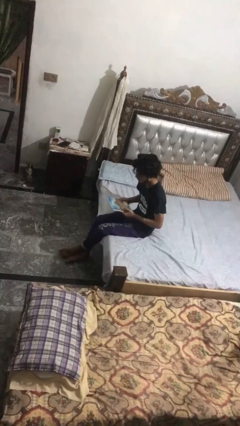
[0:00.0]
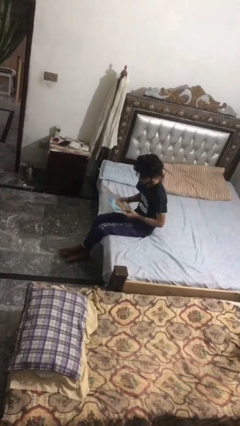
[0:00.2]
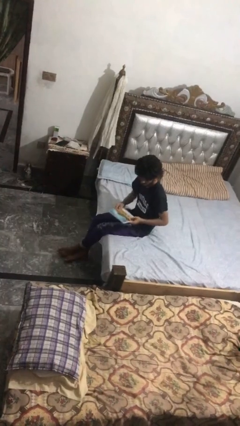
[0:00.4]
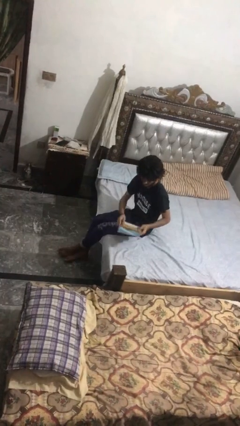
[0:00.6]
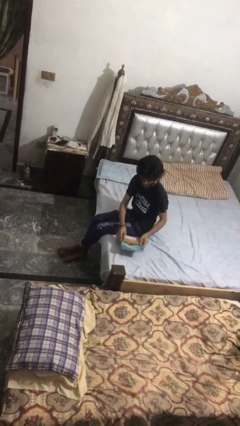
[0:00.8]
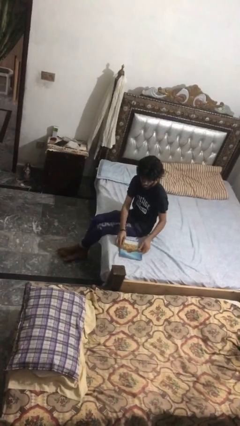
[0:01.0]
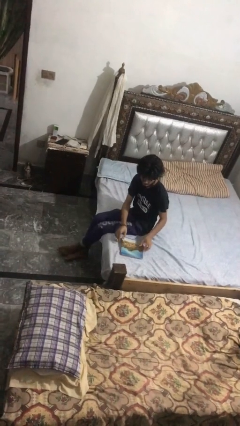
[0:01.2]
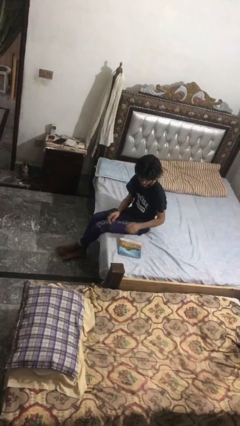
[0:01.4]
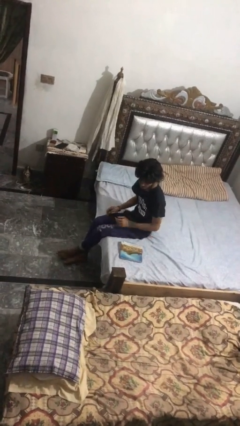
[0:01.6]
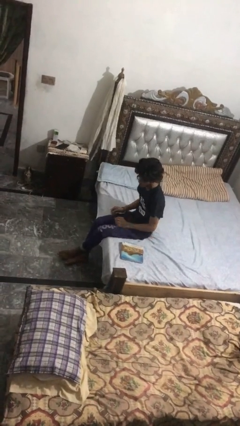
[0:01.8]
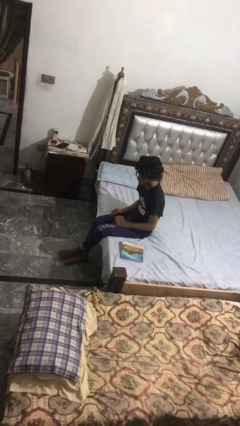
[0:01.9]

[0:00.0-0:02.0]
person puts down object on bed

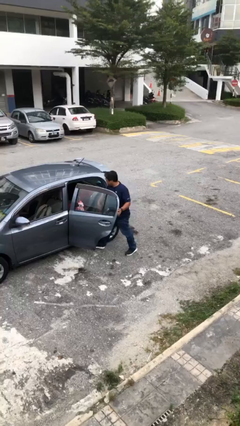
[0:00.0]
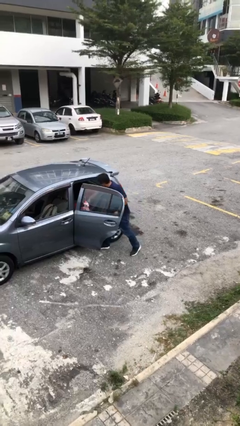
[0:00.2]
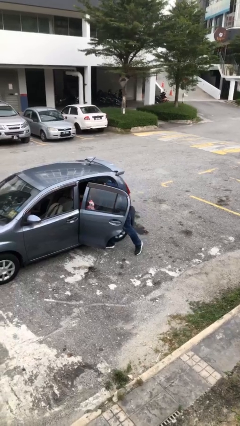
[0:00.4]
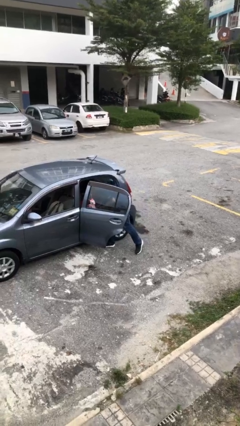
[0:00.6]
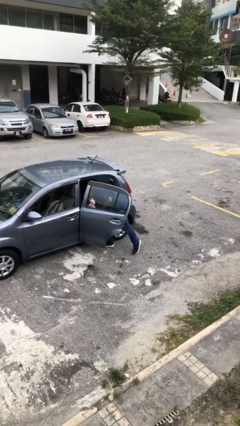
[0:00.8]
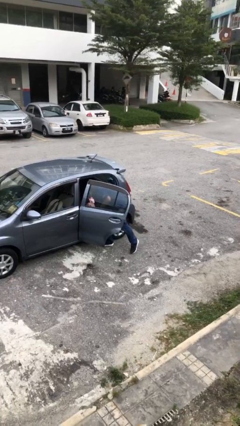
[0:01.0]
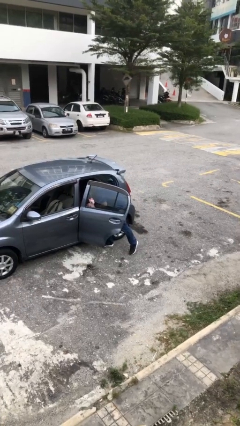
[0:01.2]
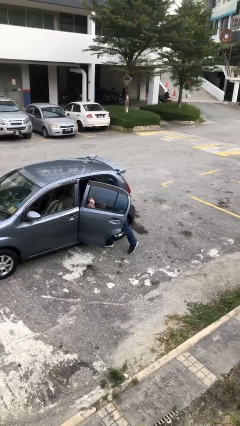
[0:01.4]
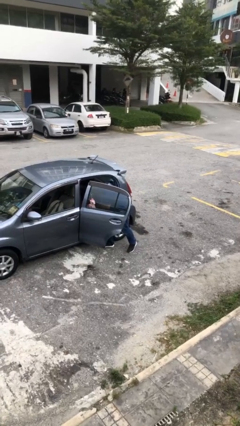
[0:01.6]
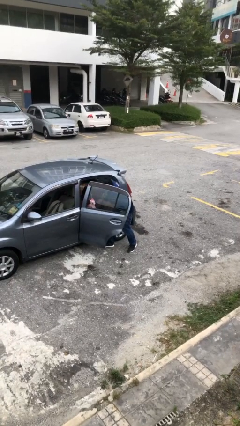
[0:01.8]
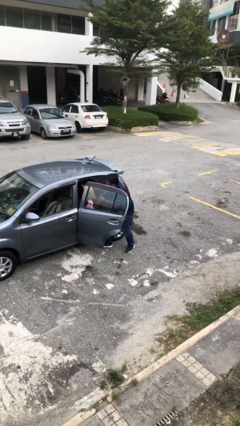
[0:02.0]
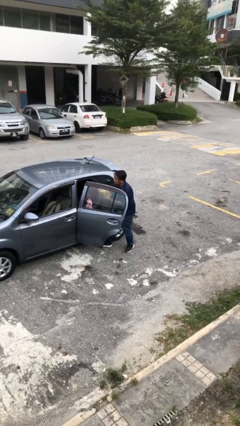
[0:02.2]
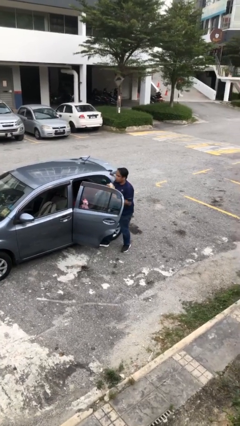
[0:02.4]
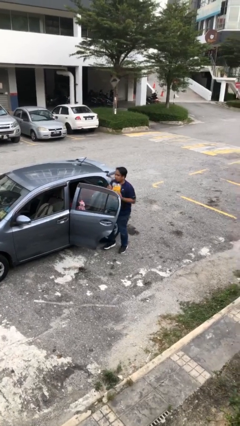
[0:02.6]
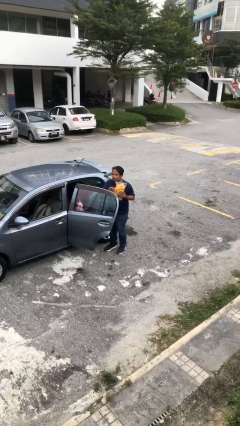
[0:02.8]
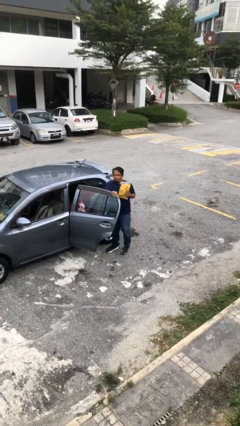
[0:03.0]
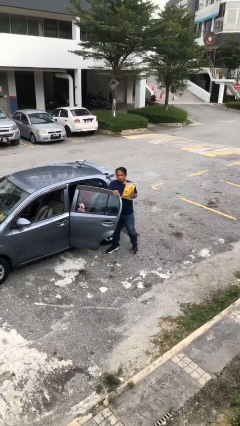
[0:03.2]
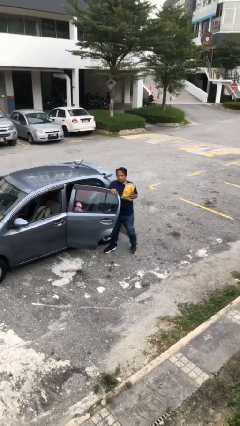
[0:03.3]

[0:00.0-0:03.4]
person unloads car

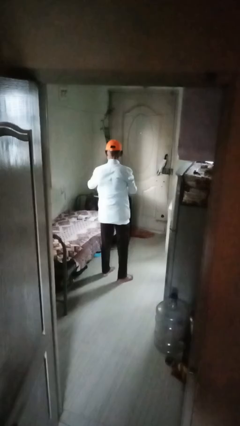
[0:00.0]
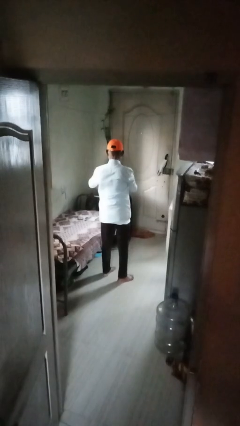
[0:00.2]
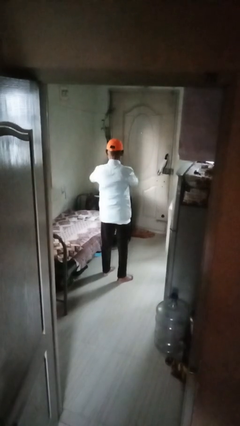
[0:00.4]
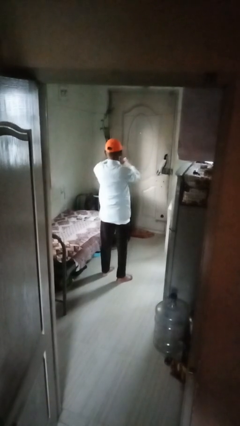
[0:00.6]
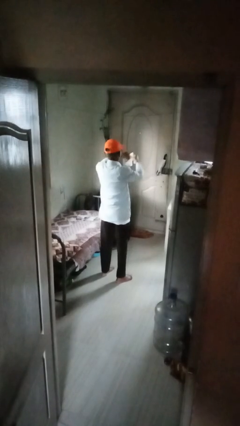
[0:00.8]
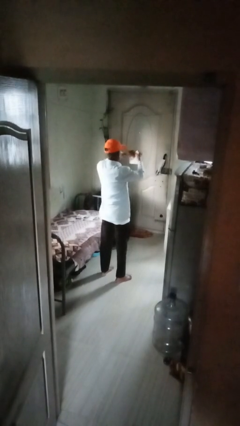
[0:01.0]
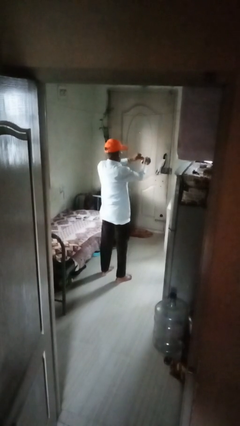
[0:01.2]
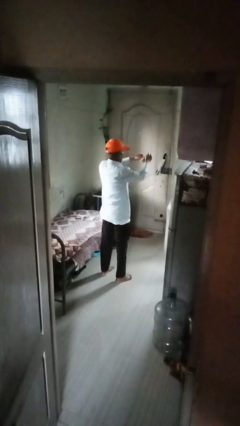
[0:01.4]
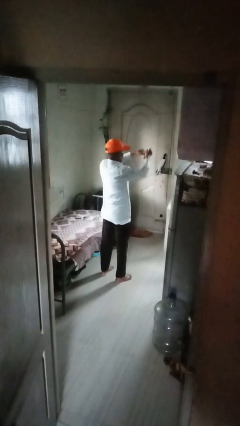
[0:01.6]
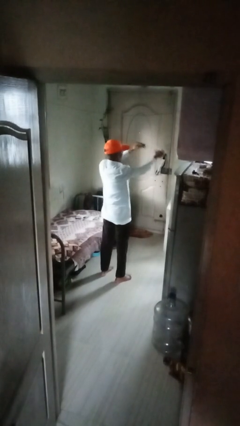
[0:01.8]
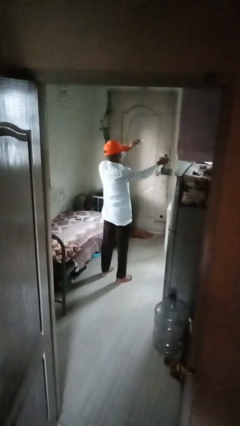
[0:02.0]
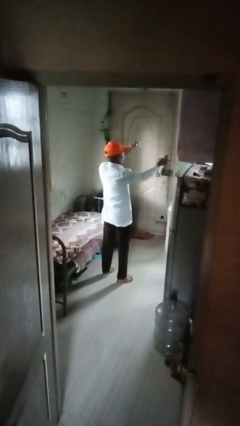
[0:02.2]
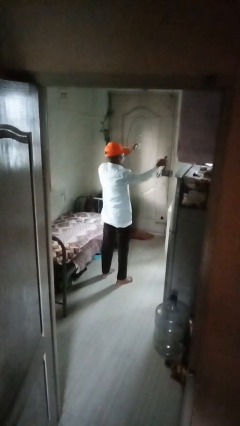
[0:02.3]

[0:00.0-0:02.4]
person tears paper

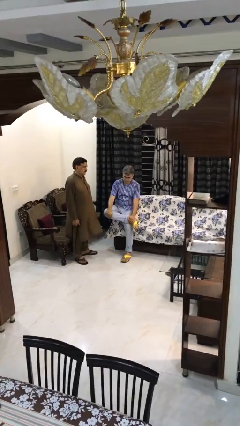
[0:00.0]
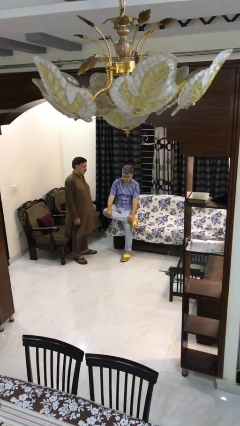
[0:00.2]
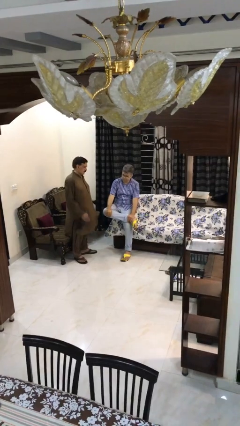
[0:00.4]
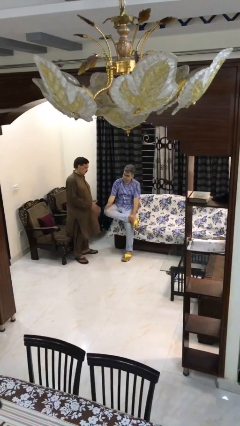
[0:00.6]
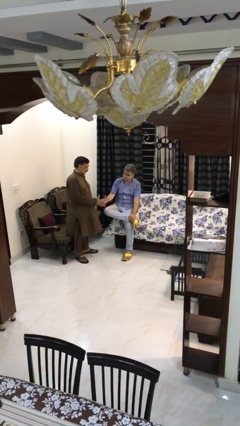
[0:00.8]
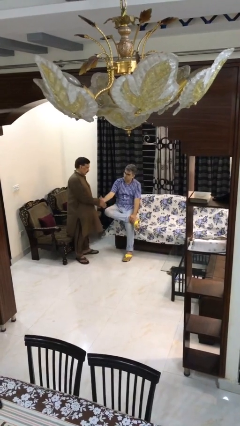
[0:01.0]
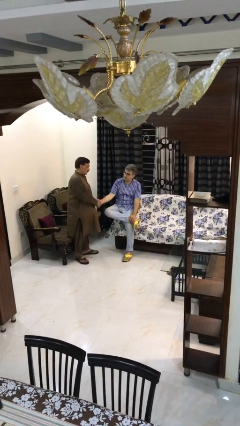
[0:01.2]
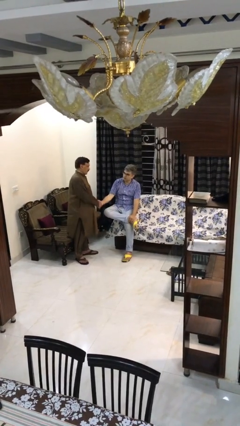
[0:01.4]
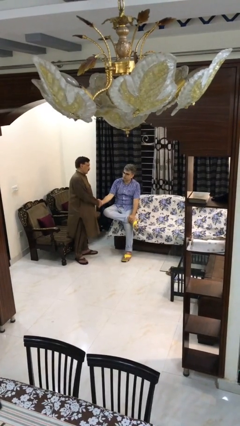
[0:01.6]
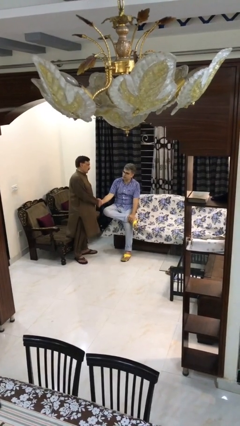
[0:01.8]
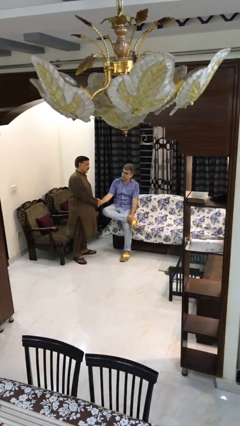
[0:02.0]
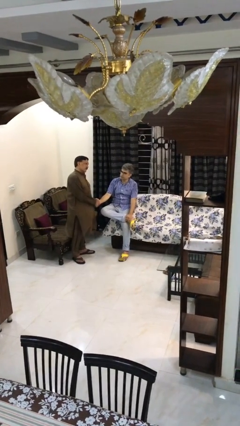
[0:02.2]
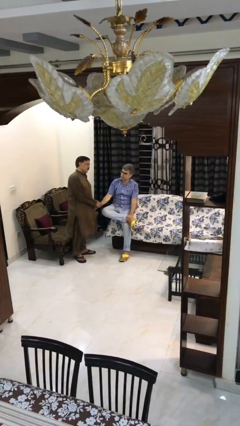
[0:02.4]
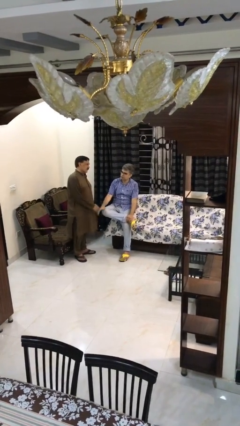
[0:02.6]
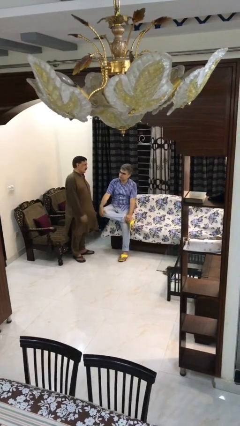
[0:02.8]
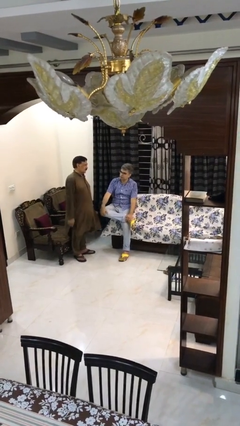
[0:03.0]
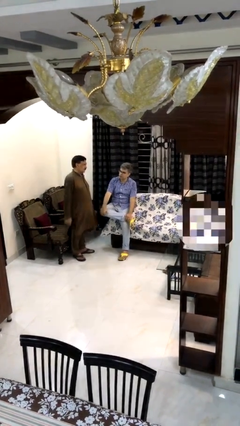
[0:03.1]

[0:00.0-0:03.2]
person shakes hand

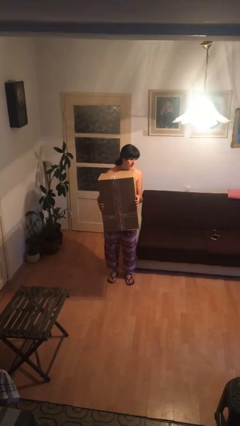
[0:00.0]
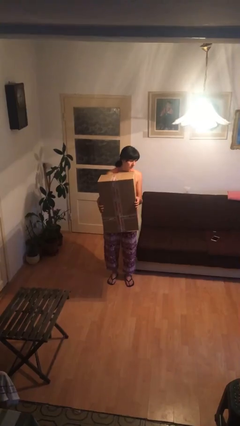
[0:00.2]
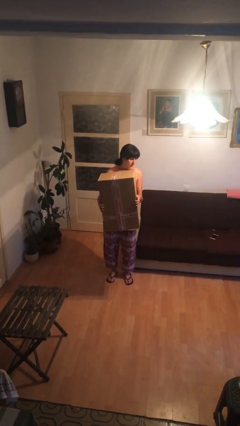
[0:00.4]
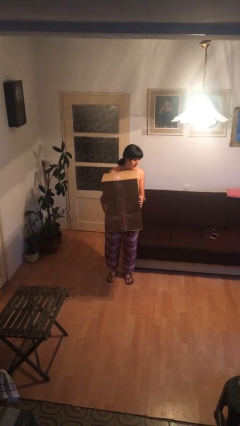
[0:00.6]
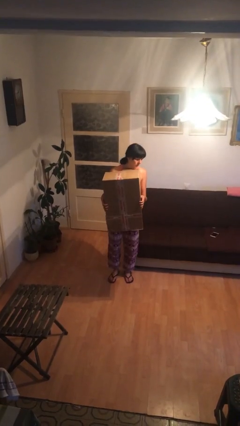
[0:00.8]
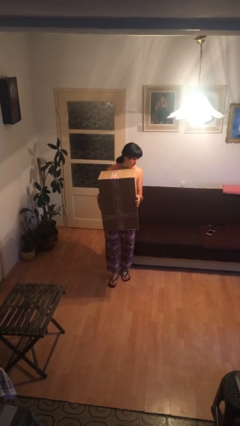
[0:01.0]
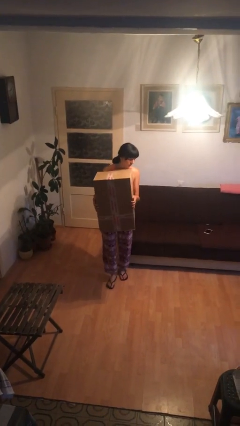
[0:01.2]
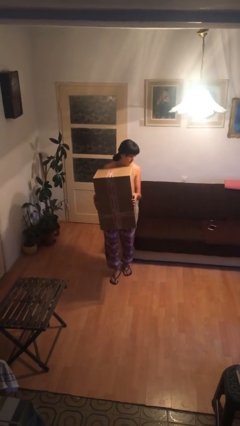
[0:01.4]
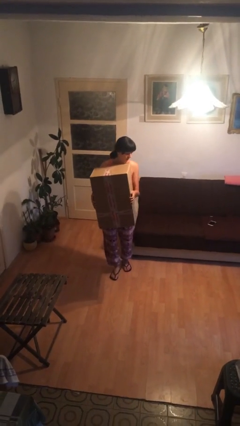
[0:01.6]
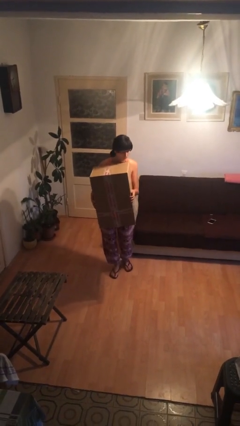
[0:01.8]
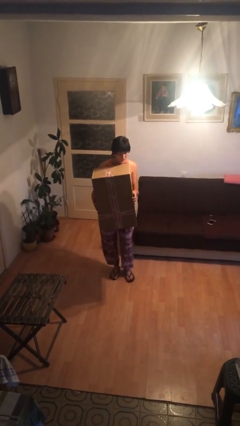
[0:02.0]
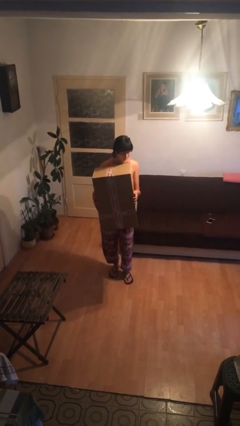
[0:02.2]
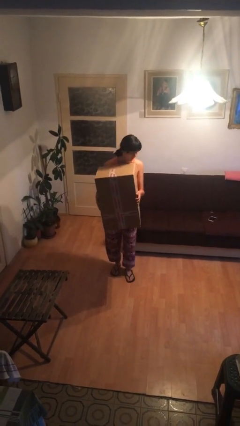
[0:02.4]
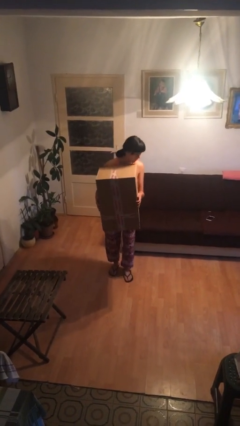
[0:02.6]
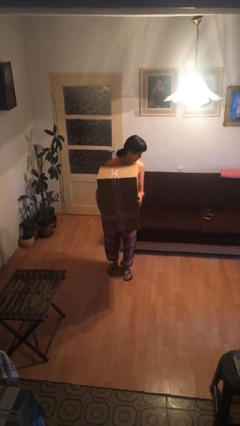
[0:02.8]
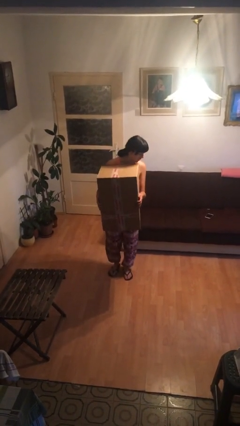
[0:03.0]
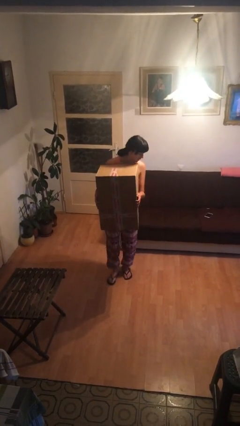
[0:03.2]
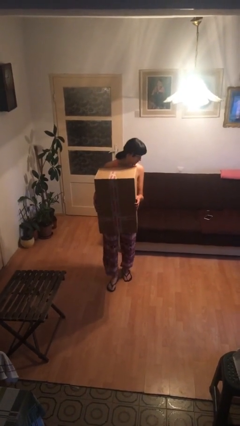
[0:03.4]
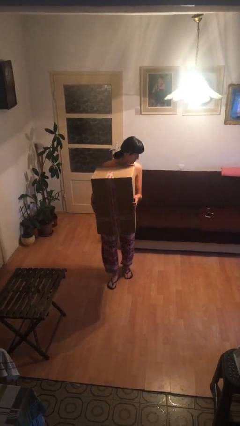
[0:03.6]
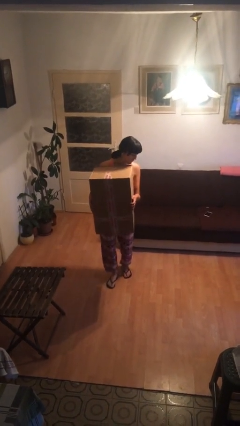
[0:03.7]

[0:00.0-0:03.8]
person carries heavy object

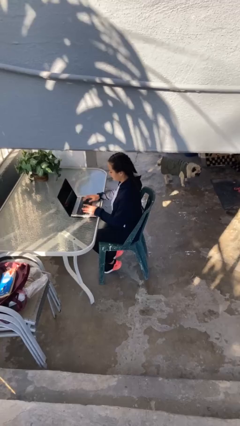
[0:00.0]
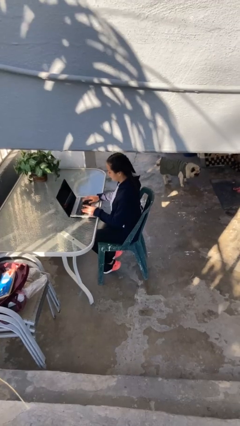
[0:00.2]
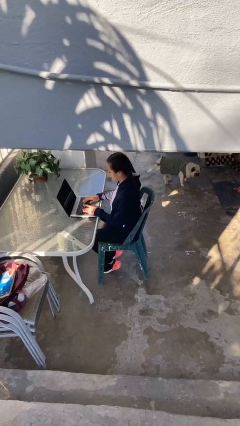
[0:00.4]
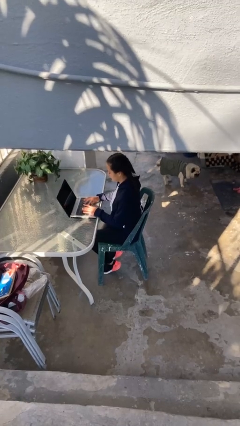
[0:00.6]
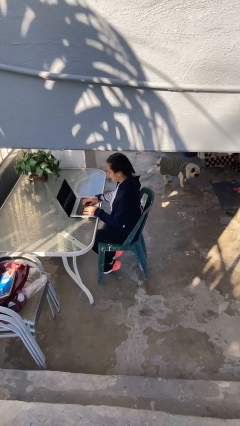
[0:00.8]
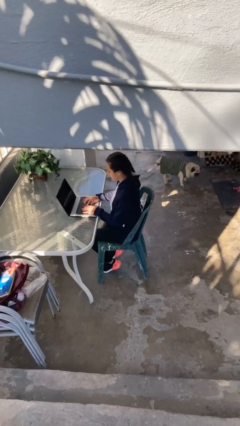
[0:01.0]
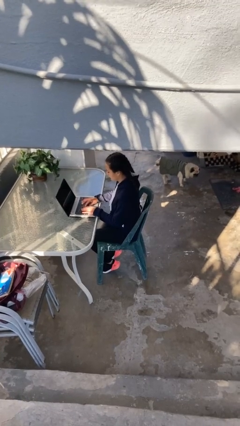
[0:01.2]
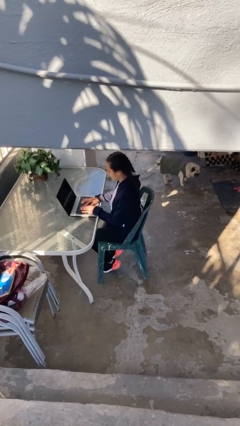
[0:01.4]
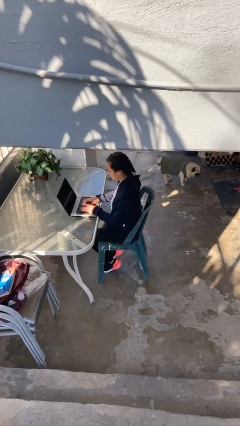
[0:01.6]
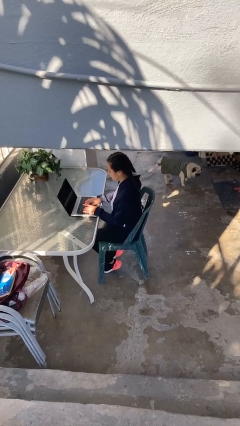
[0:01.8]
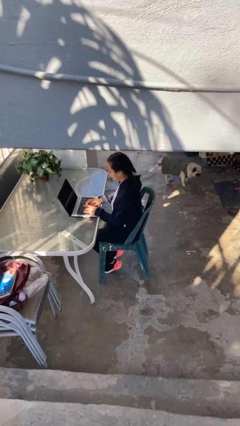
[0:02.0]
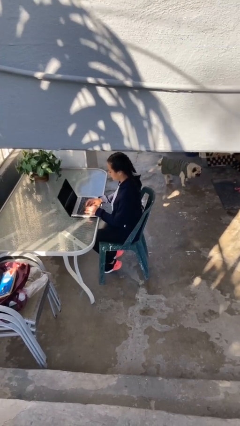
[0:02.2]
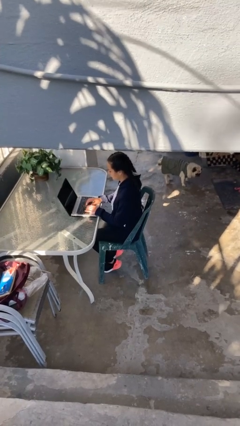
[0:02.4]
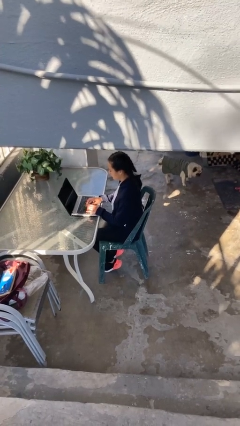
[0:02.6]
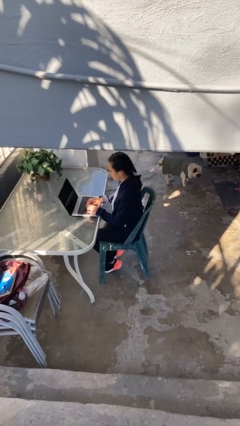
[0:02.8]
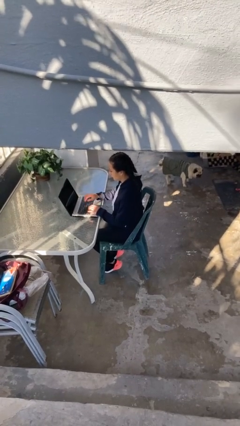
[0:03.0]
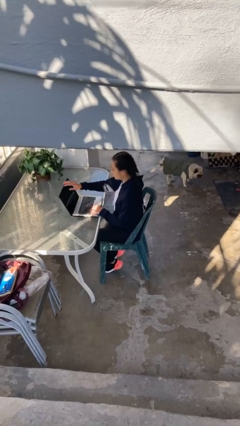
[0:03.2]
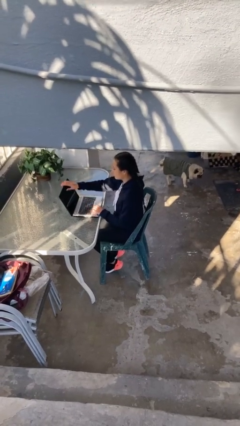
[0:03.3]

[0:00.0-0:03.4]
person interacts with laptop
